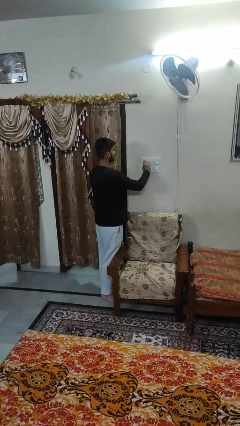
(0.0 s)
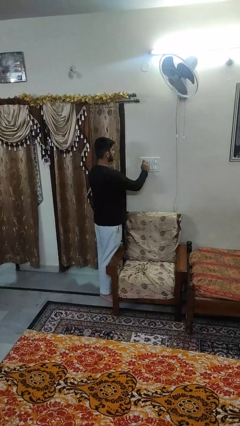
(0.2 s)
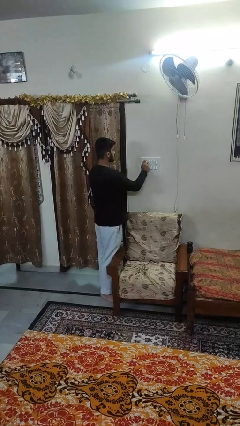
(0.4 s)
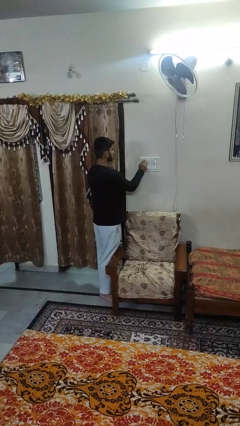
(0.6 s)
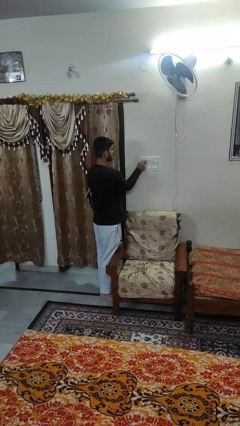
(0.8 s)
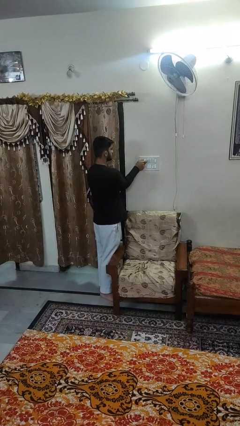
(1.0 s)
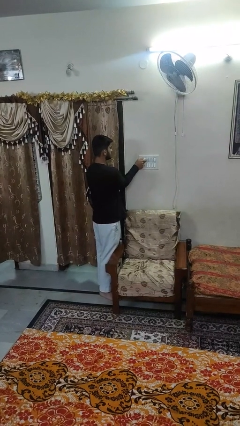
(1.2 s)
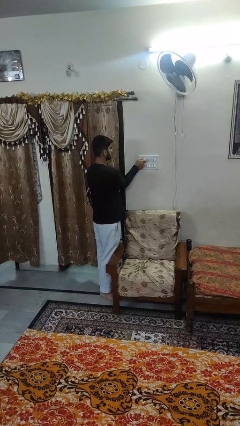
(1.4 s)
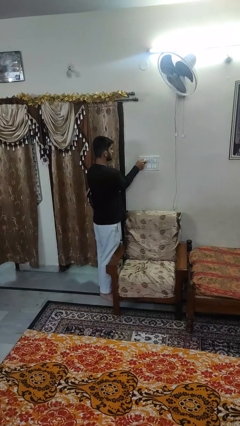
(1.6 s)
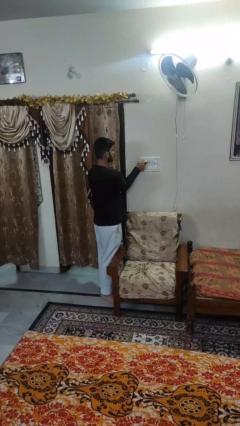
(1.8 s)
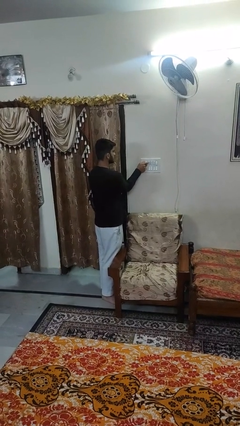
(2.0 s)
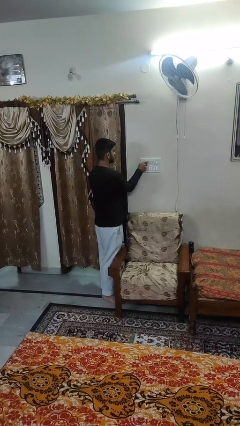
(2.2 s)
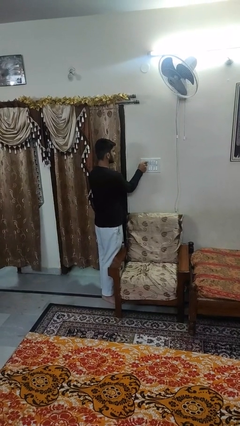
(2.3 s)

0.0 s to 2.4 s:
person adjusts thermostat

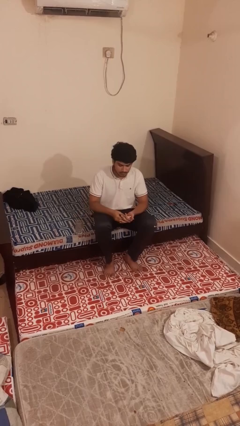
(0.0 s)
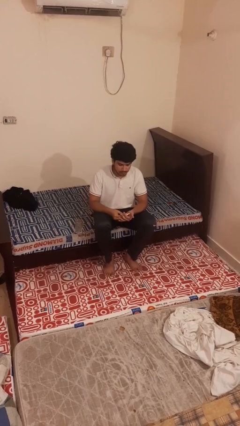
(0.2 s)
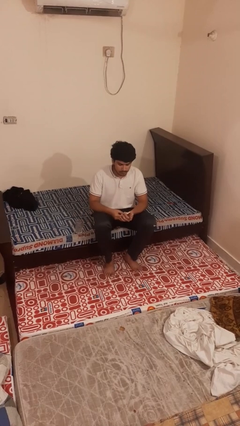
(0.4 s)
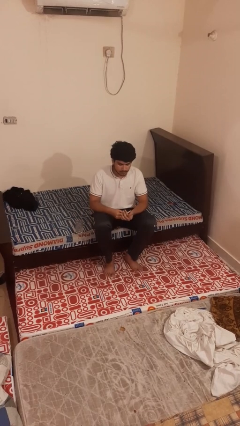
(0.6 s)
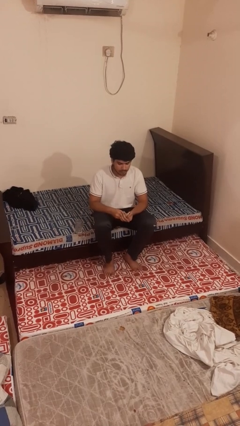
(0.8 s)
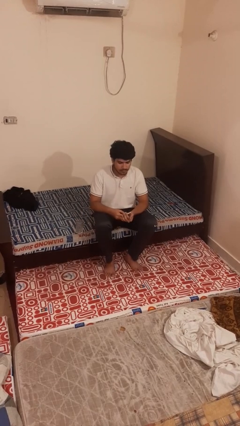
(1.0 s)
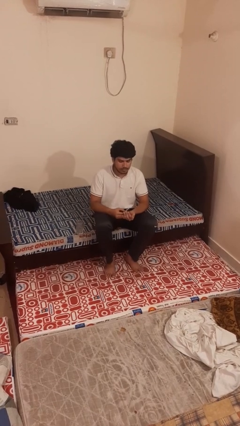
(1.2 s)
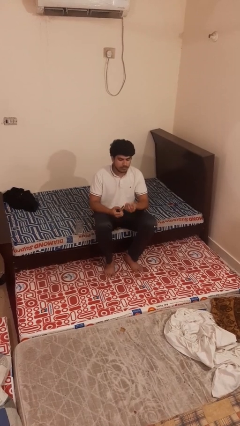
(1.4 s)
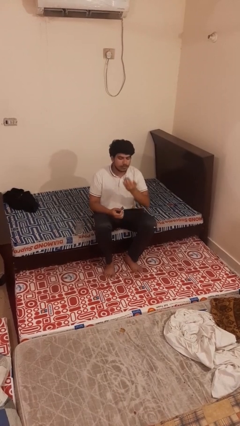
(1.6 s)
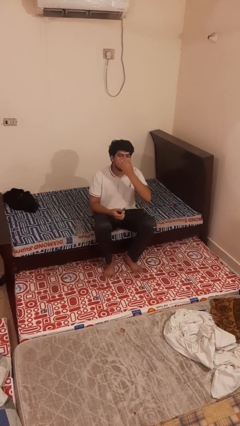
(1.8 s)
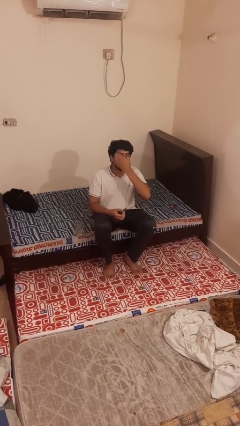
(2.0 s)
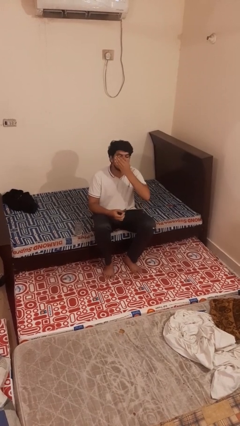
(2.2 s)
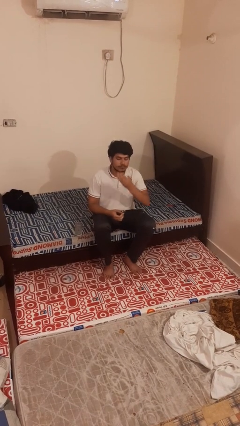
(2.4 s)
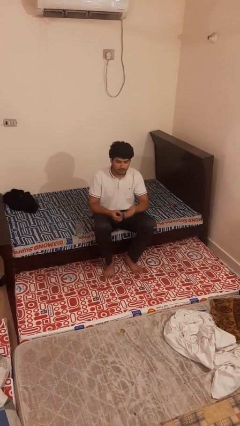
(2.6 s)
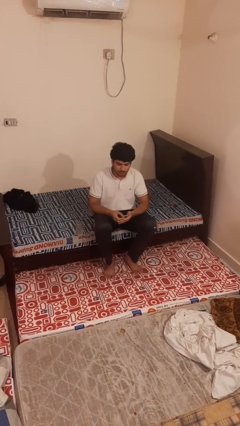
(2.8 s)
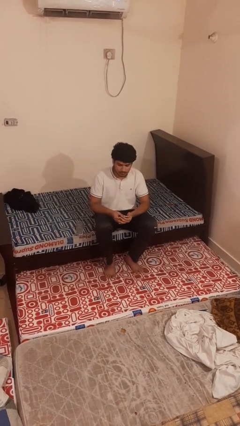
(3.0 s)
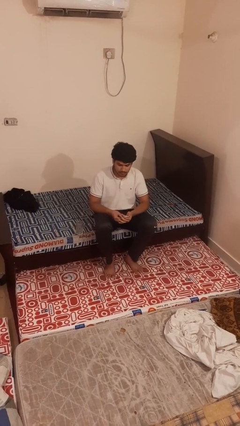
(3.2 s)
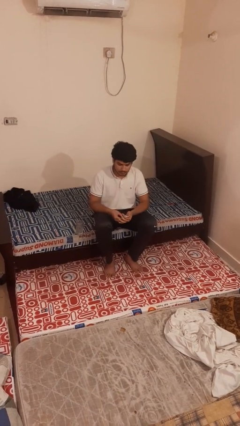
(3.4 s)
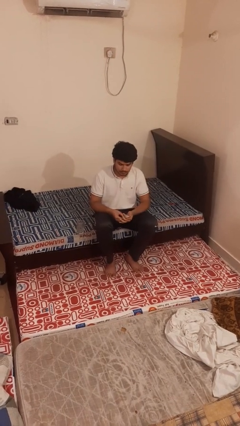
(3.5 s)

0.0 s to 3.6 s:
person takes medicine pills

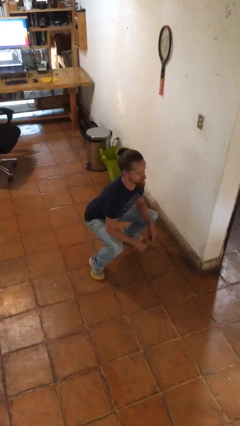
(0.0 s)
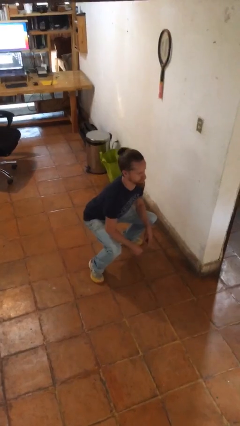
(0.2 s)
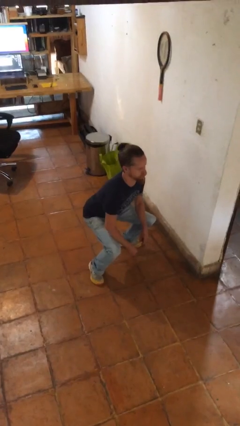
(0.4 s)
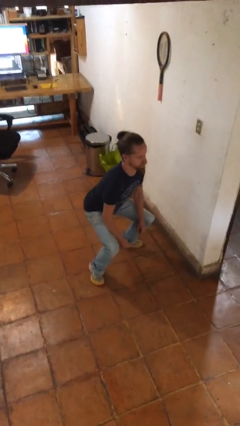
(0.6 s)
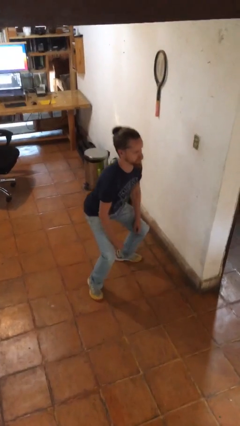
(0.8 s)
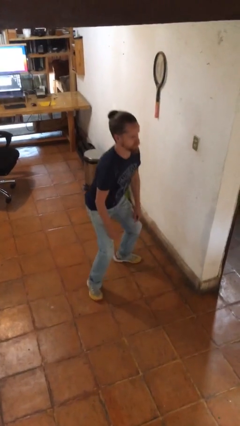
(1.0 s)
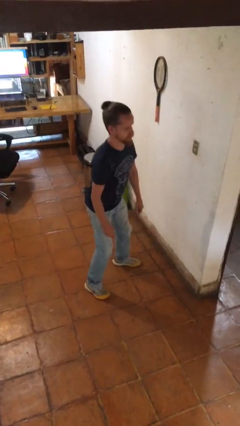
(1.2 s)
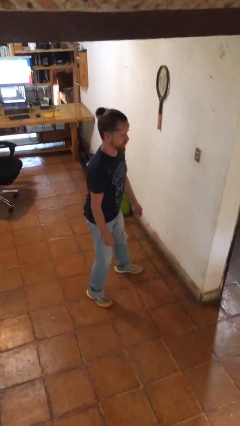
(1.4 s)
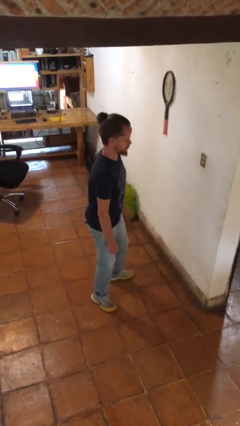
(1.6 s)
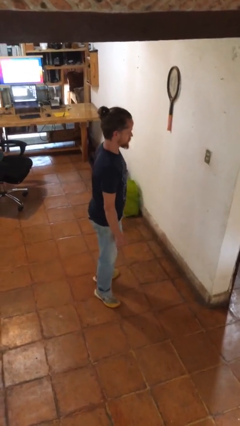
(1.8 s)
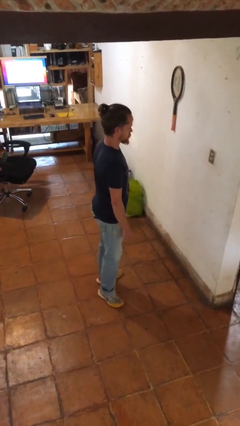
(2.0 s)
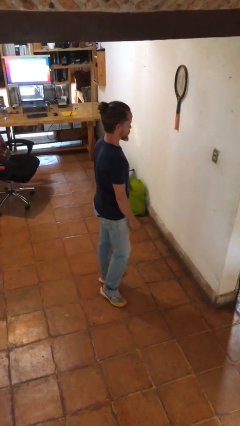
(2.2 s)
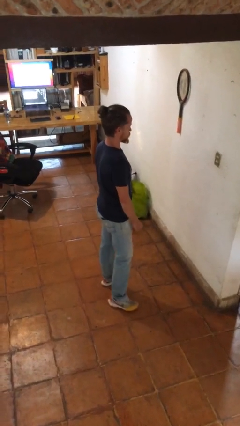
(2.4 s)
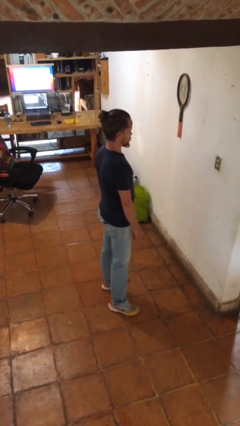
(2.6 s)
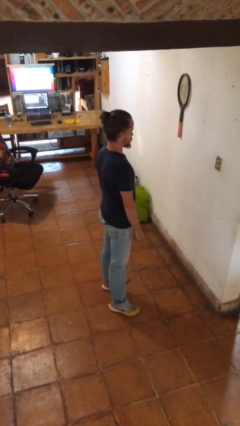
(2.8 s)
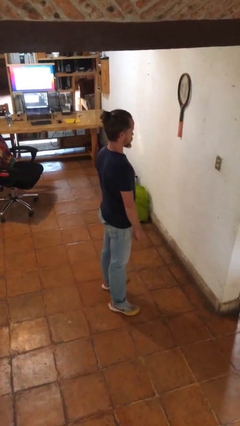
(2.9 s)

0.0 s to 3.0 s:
person stands up

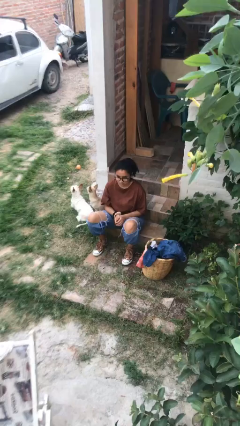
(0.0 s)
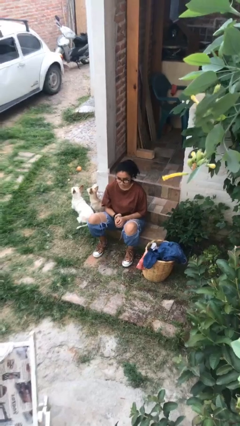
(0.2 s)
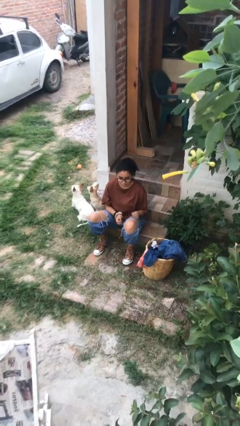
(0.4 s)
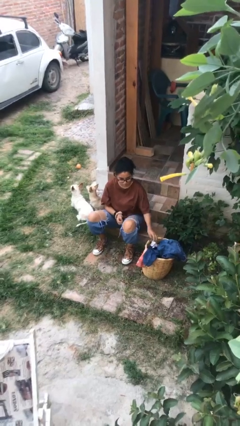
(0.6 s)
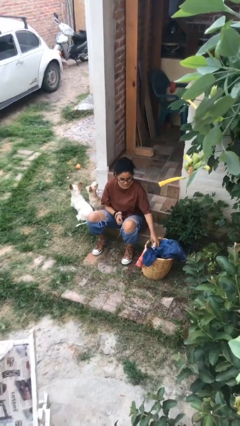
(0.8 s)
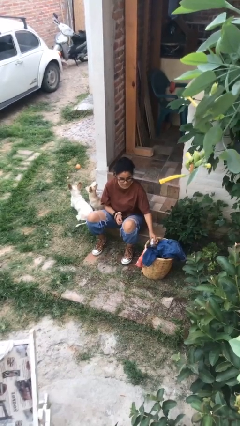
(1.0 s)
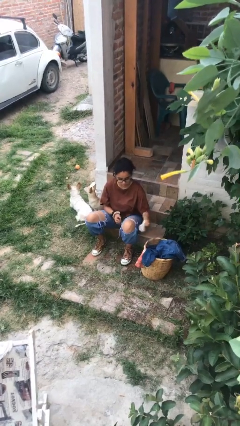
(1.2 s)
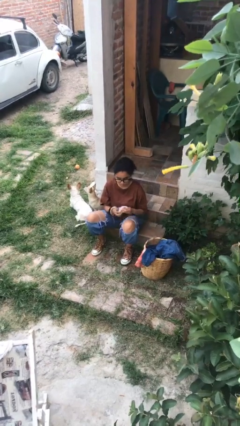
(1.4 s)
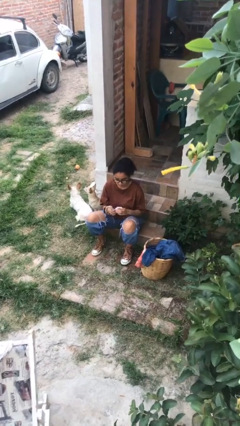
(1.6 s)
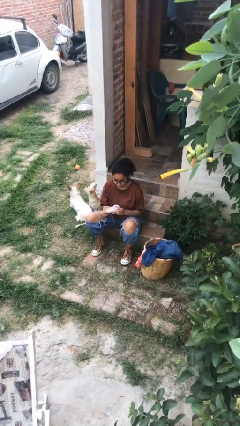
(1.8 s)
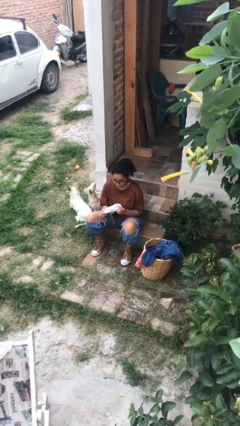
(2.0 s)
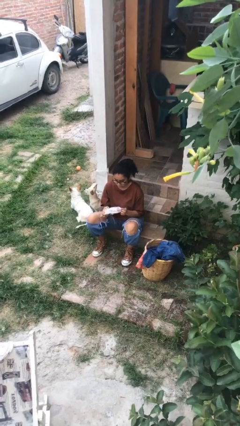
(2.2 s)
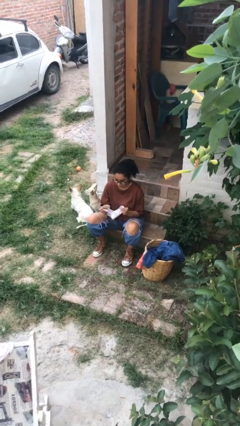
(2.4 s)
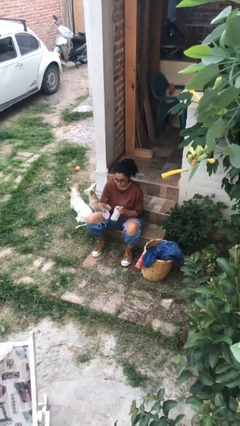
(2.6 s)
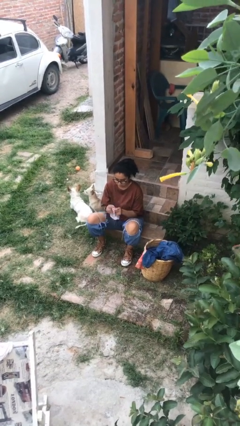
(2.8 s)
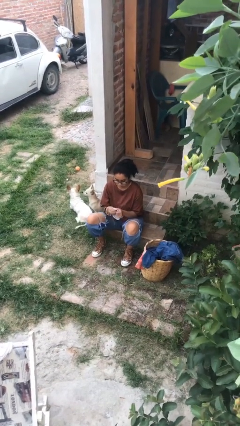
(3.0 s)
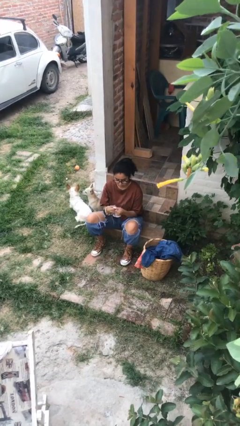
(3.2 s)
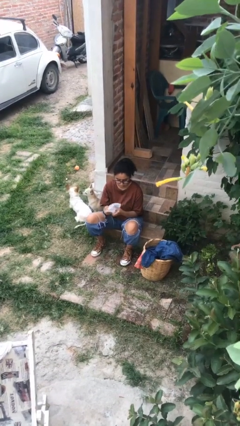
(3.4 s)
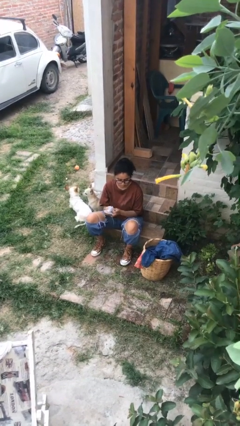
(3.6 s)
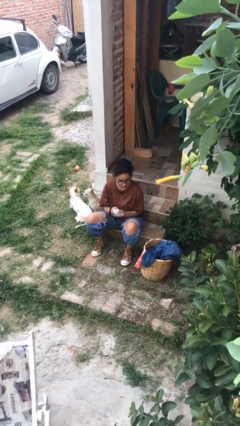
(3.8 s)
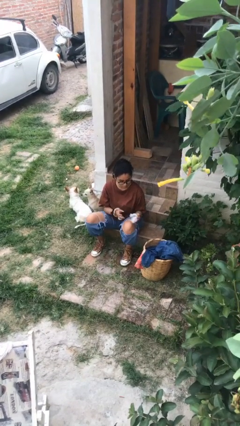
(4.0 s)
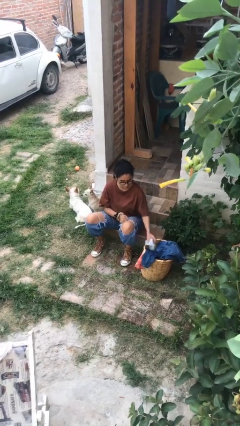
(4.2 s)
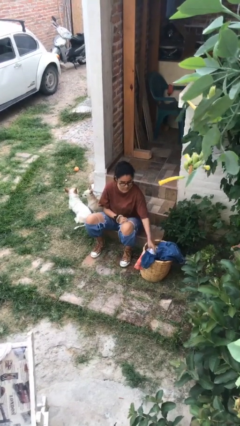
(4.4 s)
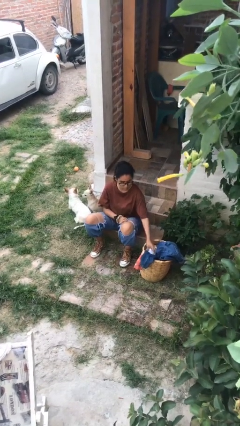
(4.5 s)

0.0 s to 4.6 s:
person folds socks

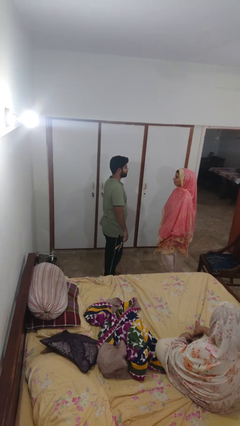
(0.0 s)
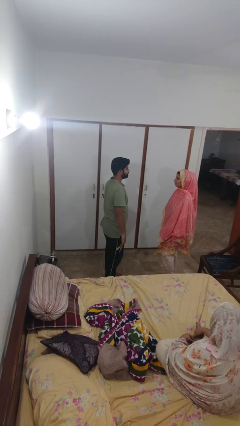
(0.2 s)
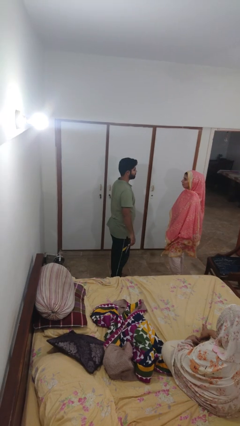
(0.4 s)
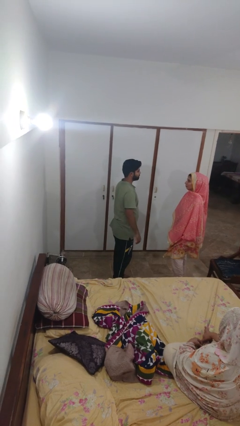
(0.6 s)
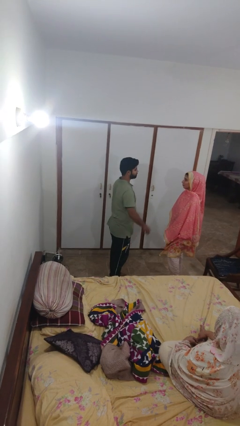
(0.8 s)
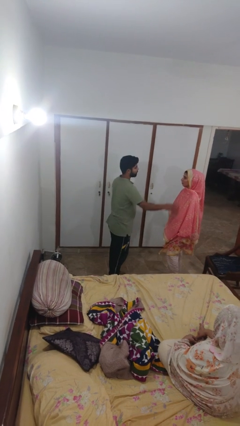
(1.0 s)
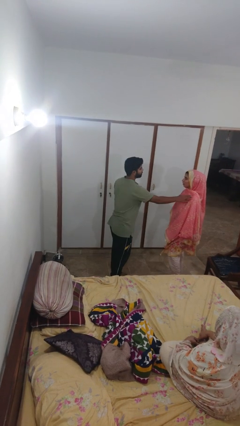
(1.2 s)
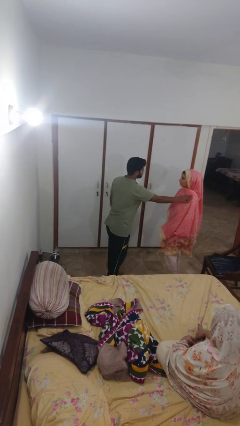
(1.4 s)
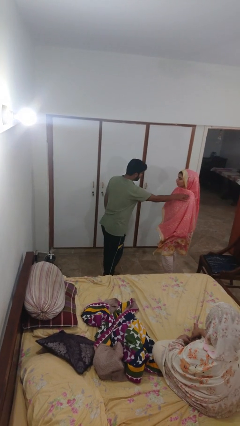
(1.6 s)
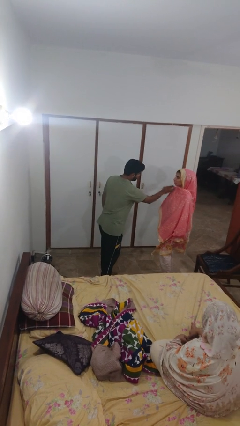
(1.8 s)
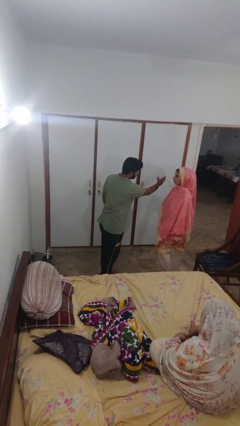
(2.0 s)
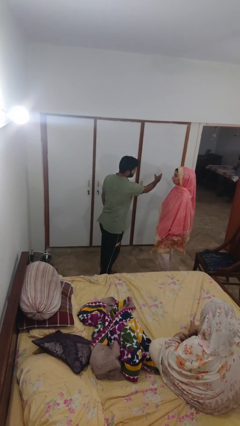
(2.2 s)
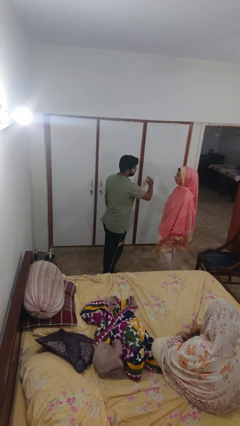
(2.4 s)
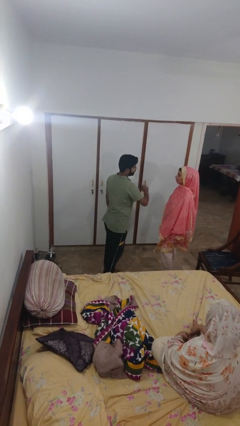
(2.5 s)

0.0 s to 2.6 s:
person shoves person

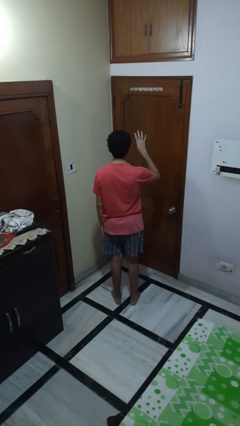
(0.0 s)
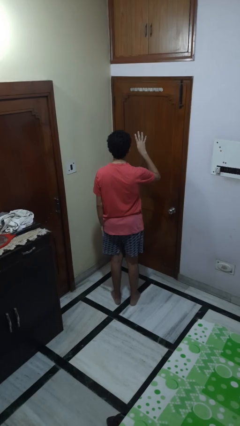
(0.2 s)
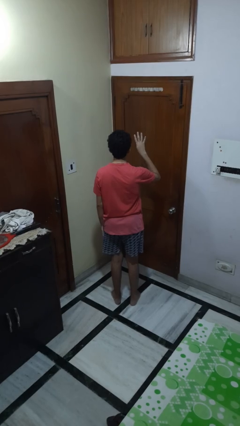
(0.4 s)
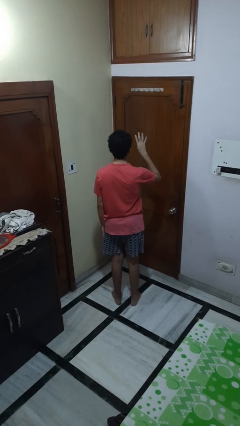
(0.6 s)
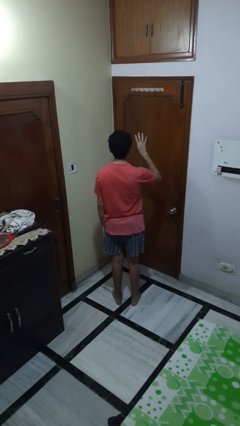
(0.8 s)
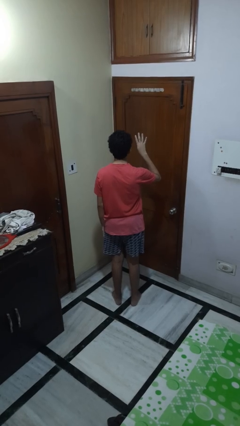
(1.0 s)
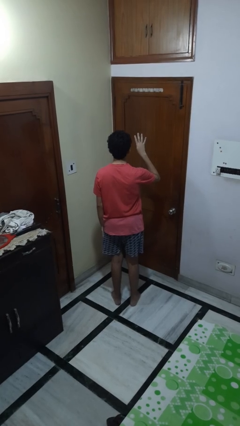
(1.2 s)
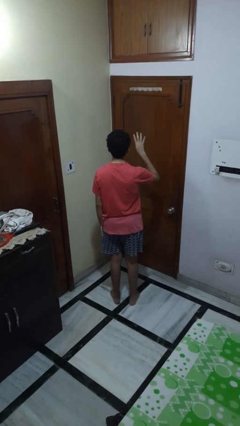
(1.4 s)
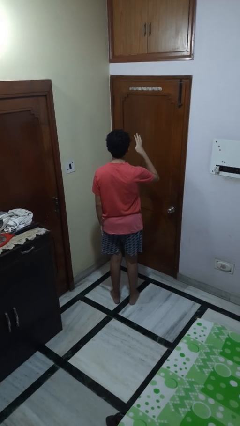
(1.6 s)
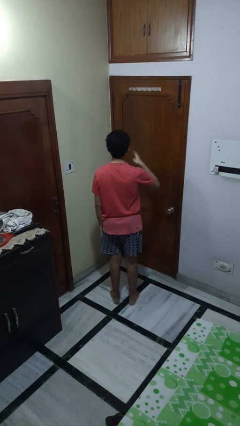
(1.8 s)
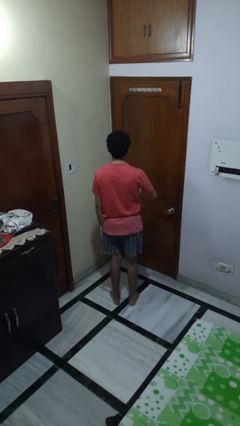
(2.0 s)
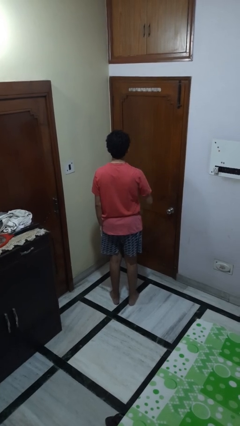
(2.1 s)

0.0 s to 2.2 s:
person gestures number four
